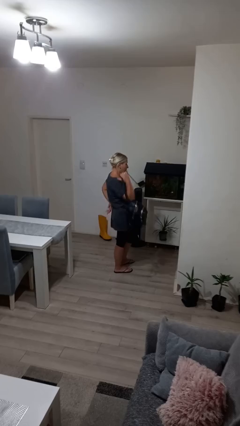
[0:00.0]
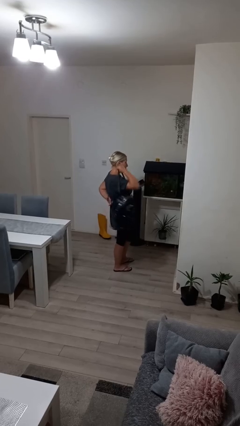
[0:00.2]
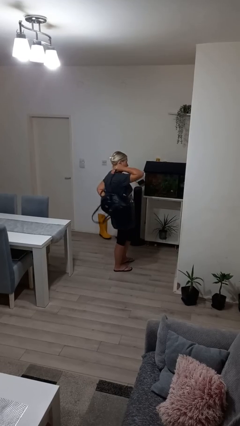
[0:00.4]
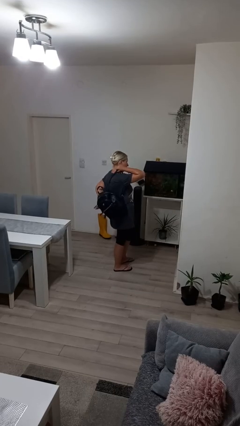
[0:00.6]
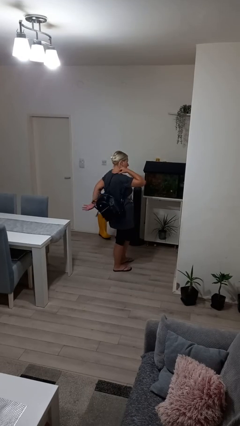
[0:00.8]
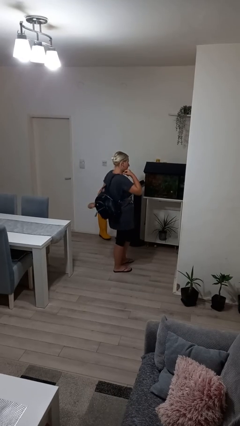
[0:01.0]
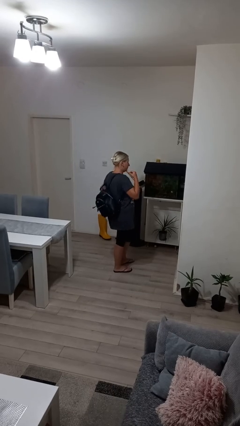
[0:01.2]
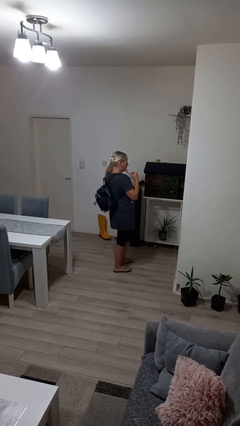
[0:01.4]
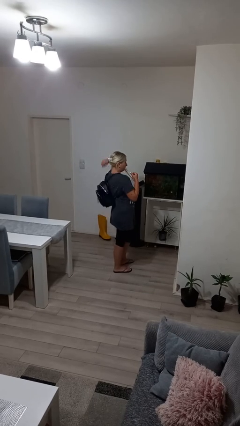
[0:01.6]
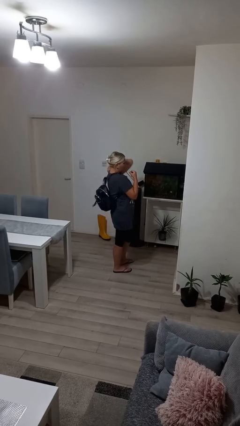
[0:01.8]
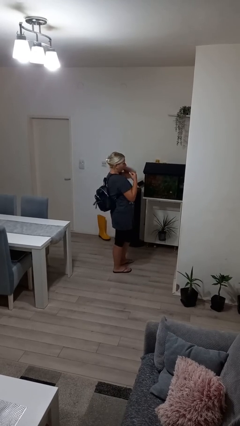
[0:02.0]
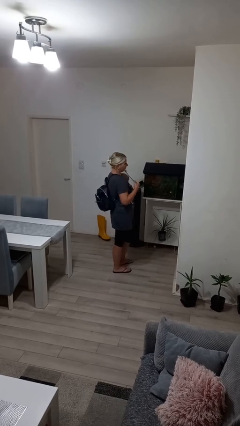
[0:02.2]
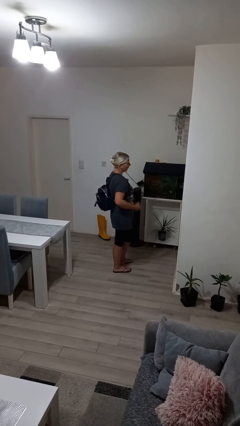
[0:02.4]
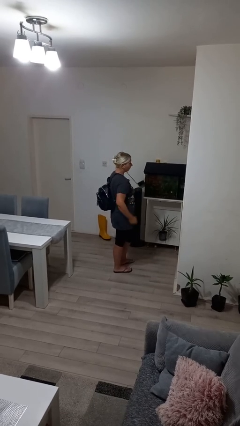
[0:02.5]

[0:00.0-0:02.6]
person puts on backpack

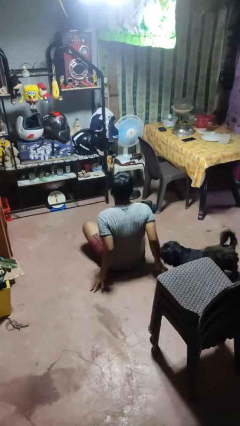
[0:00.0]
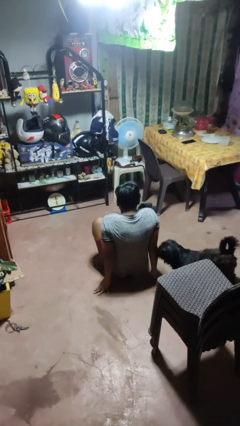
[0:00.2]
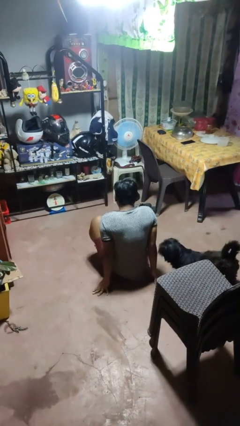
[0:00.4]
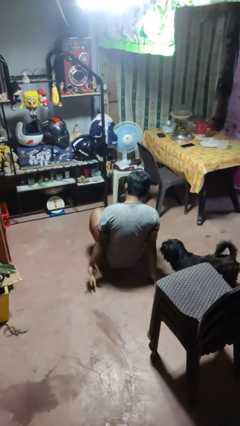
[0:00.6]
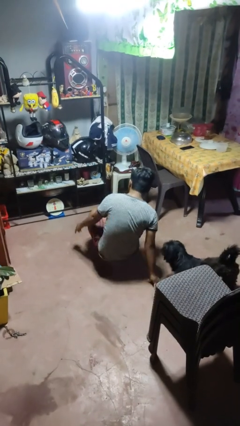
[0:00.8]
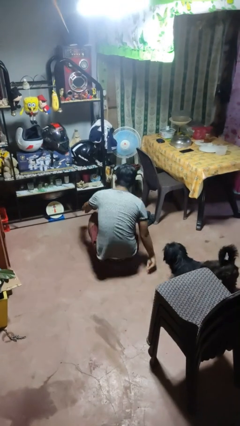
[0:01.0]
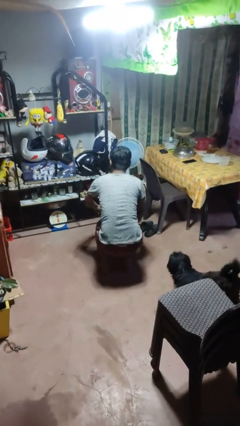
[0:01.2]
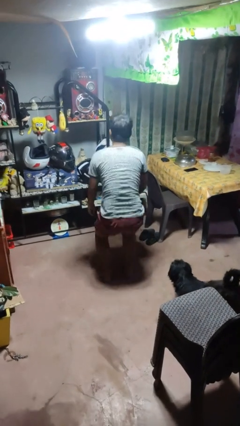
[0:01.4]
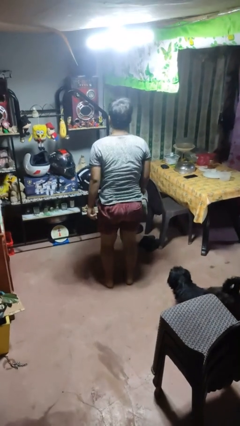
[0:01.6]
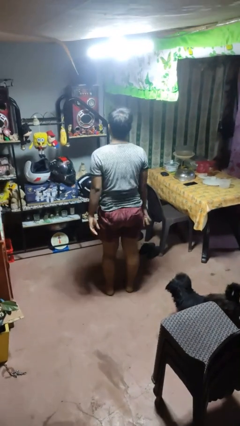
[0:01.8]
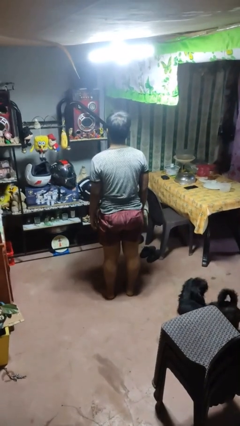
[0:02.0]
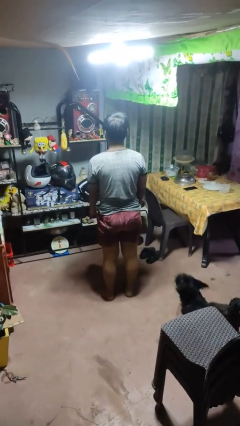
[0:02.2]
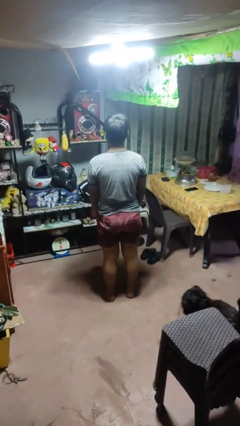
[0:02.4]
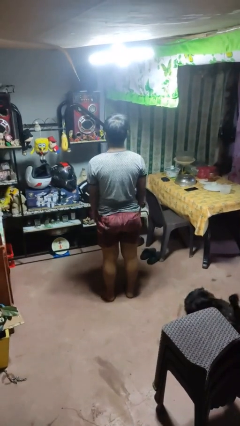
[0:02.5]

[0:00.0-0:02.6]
person stands up from floor

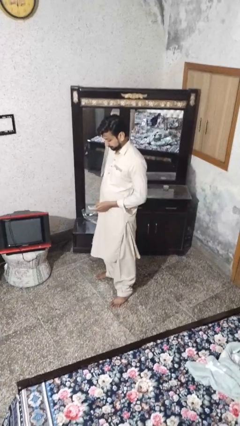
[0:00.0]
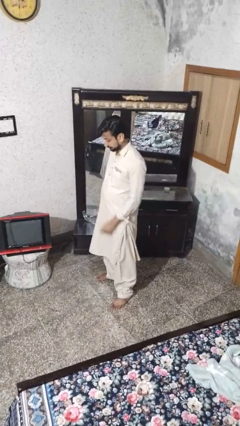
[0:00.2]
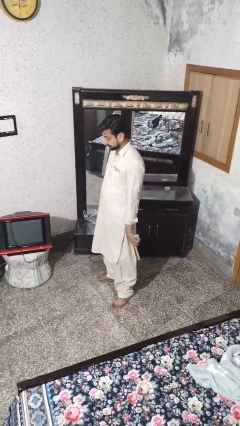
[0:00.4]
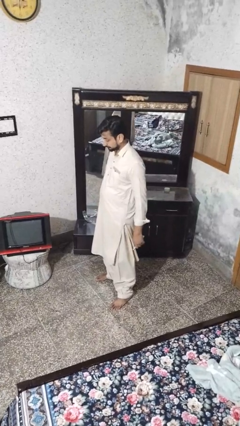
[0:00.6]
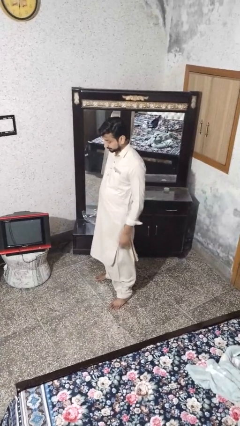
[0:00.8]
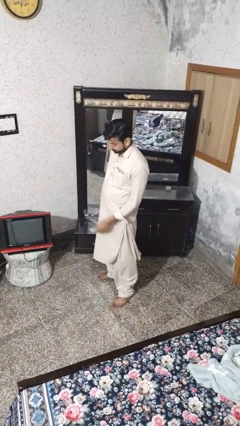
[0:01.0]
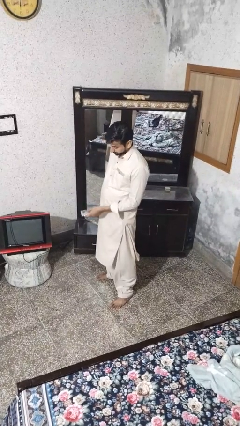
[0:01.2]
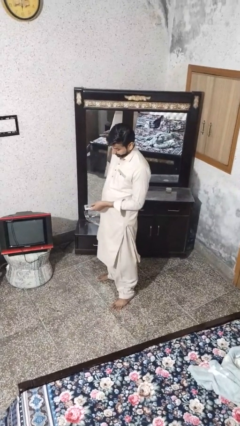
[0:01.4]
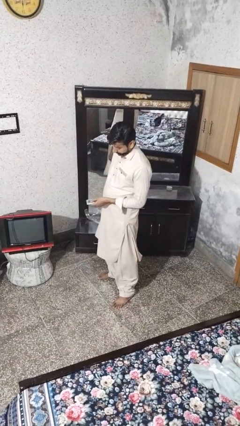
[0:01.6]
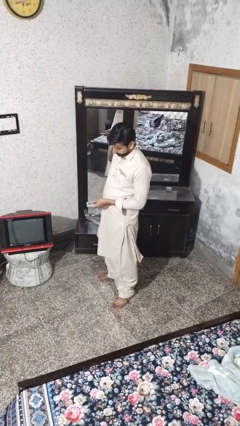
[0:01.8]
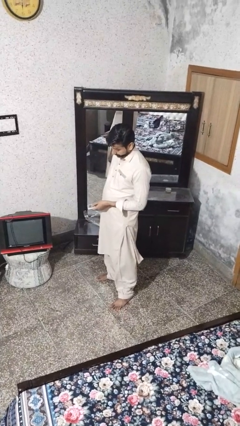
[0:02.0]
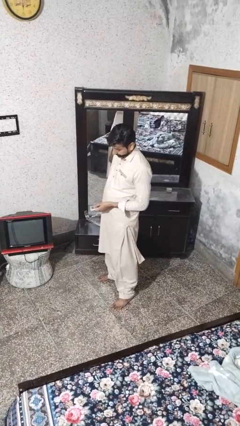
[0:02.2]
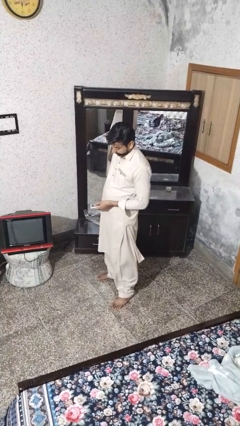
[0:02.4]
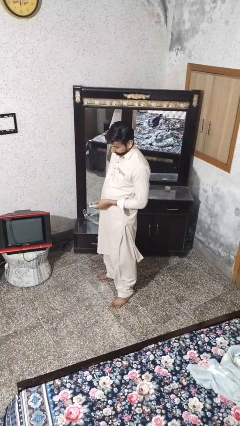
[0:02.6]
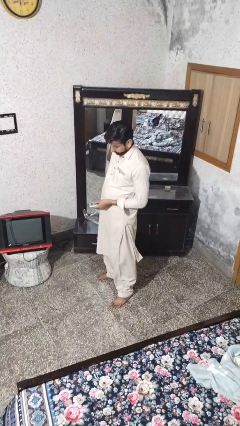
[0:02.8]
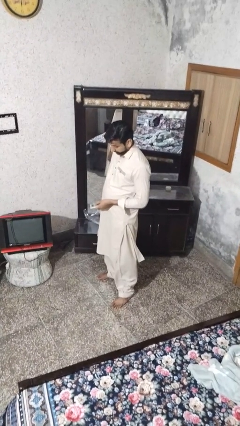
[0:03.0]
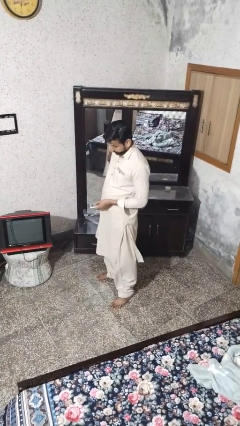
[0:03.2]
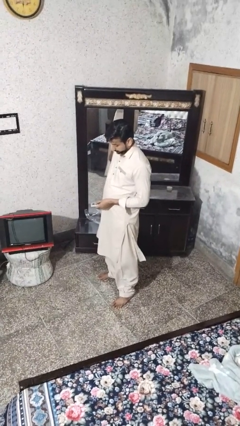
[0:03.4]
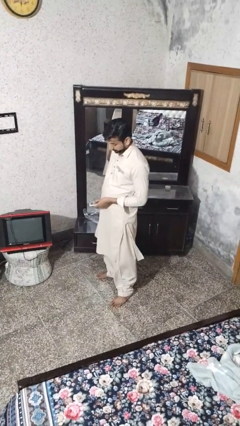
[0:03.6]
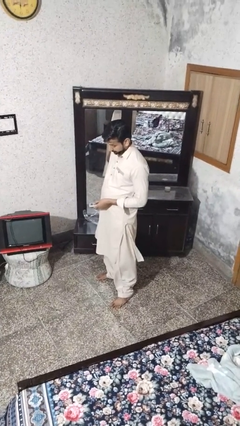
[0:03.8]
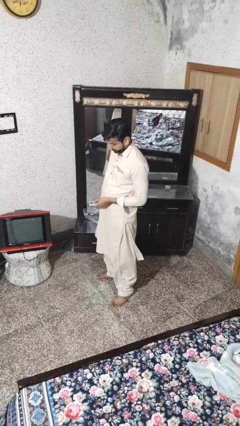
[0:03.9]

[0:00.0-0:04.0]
person uses television remote

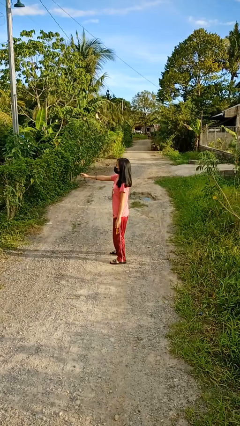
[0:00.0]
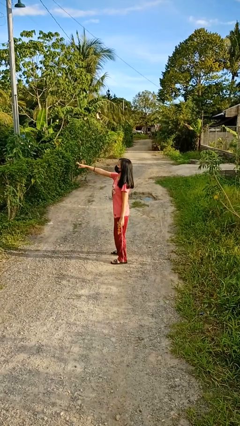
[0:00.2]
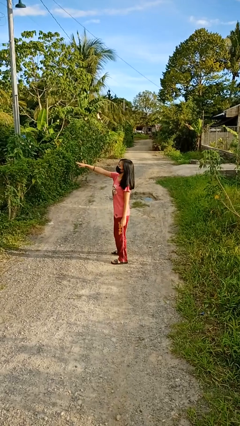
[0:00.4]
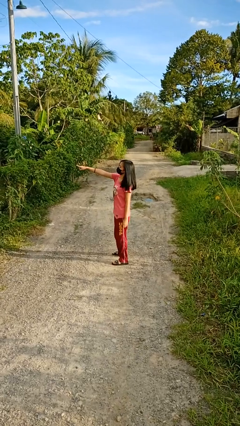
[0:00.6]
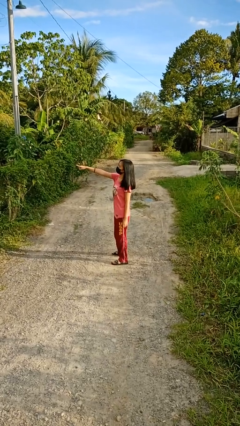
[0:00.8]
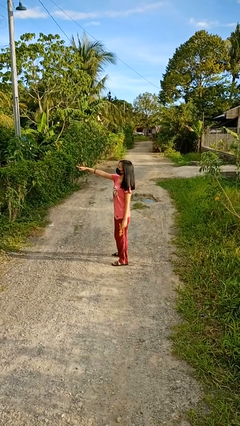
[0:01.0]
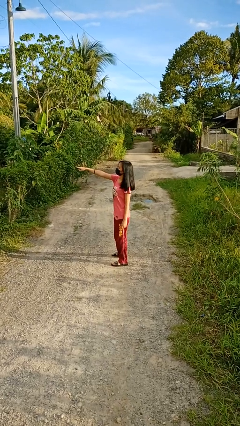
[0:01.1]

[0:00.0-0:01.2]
person points at person

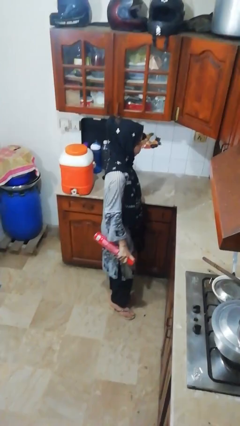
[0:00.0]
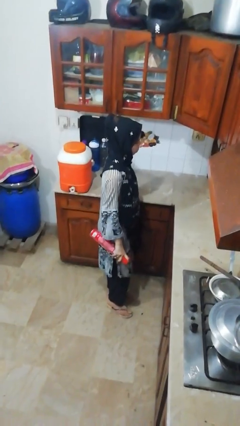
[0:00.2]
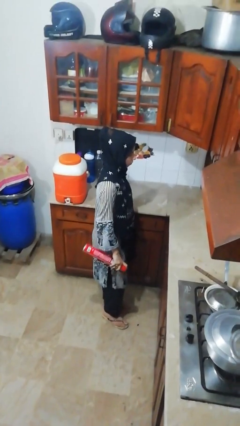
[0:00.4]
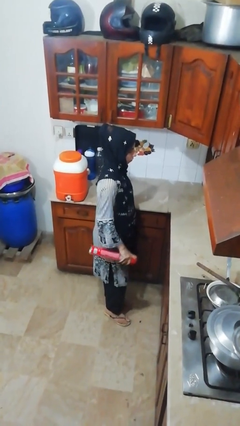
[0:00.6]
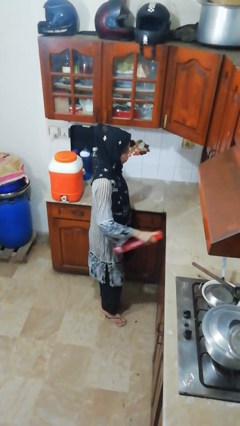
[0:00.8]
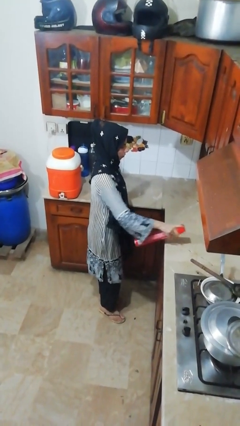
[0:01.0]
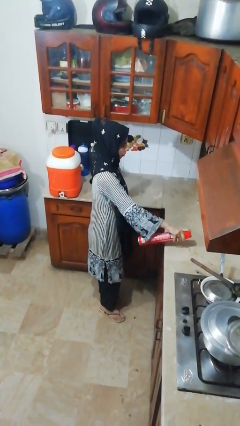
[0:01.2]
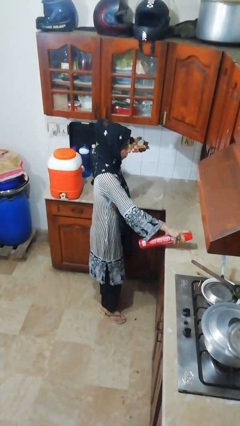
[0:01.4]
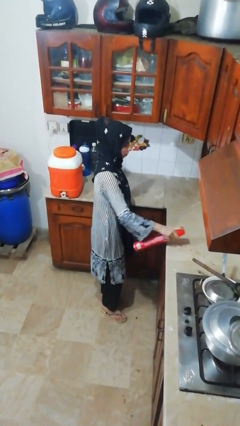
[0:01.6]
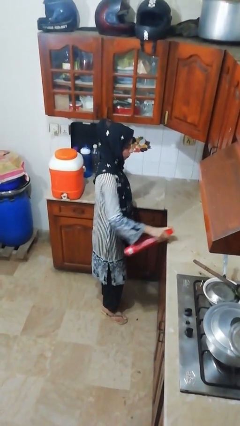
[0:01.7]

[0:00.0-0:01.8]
person sprays from bottle

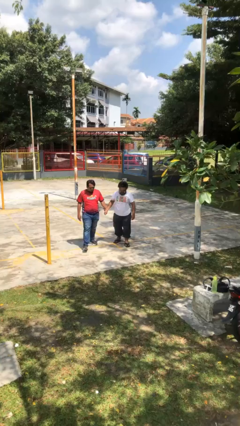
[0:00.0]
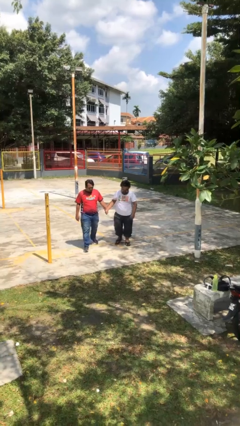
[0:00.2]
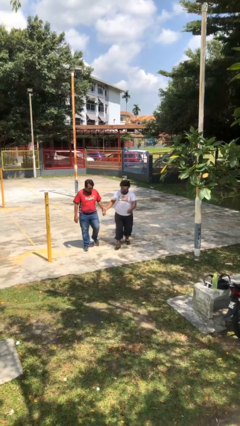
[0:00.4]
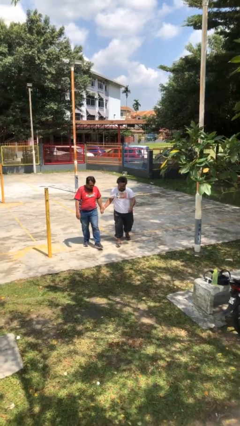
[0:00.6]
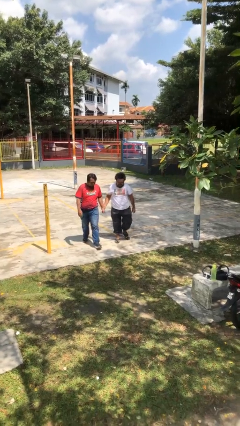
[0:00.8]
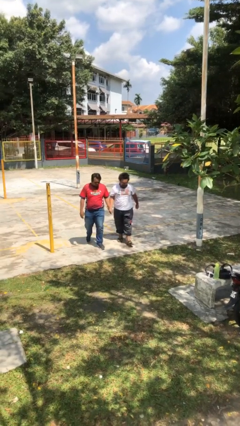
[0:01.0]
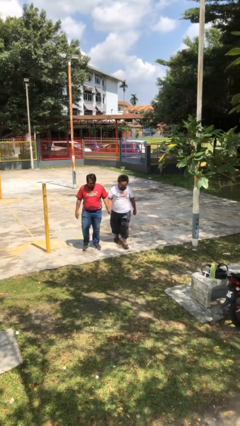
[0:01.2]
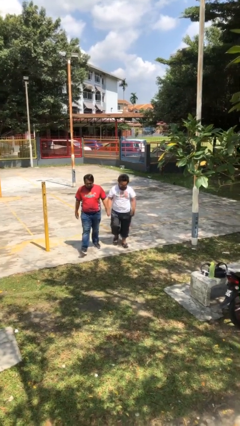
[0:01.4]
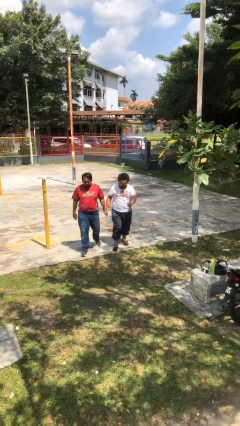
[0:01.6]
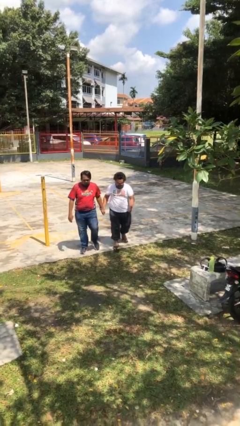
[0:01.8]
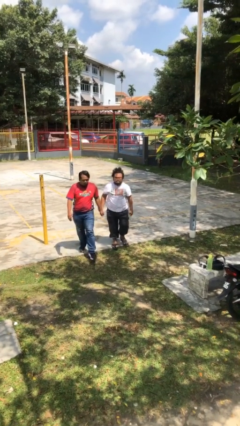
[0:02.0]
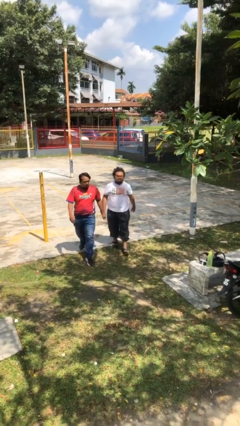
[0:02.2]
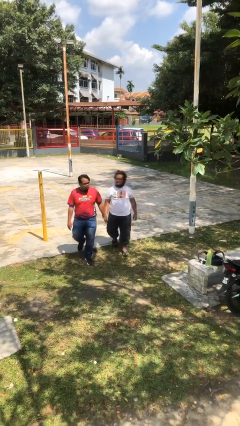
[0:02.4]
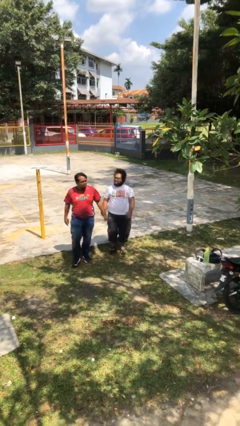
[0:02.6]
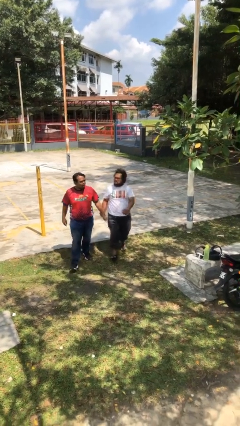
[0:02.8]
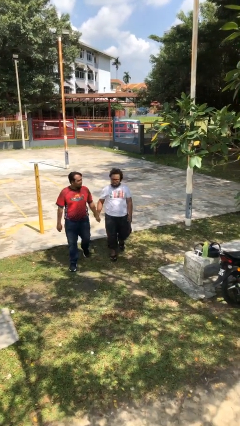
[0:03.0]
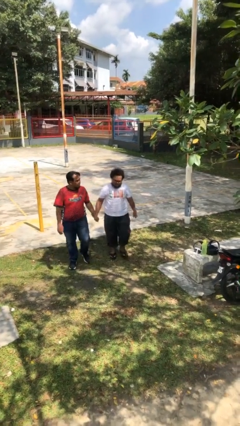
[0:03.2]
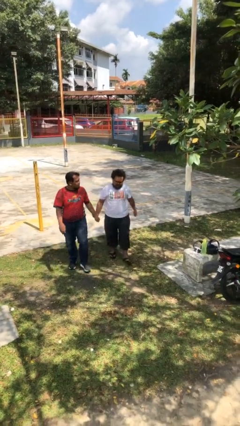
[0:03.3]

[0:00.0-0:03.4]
person holds hand

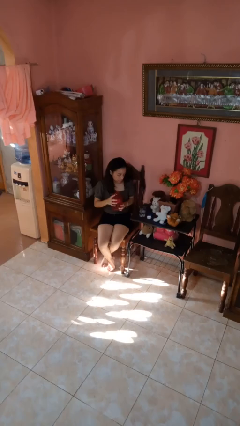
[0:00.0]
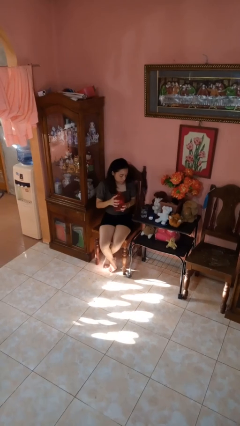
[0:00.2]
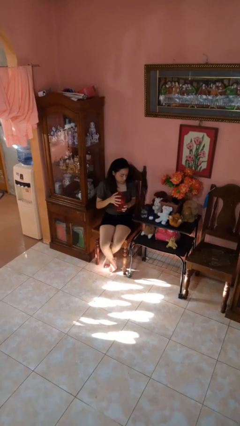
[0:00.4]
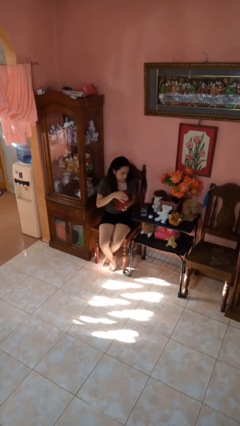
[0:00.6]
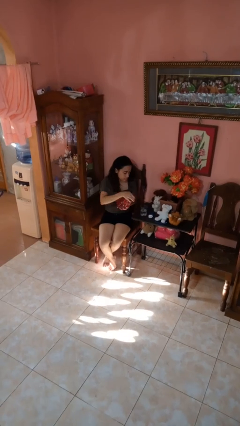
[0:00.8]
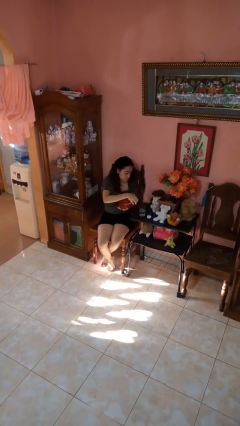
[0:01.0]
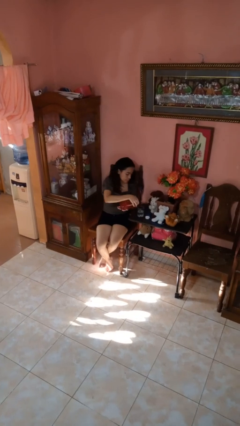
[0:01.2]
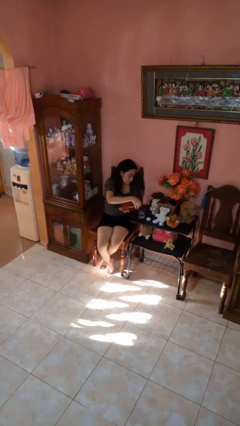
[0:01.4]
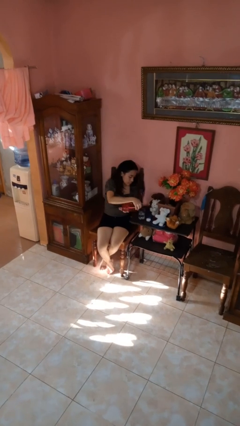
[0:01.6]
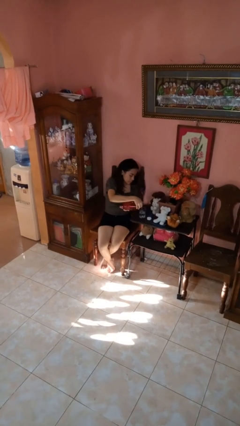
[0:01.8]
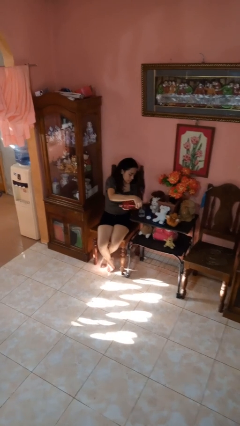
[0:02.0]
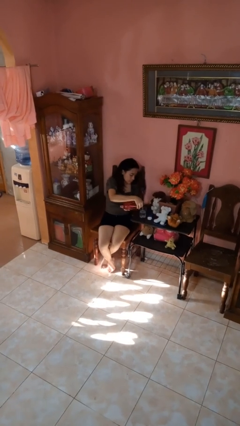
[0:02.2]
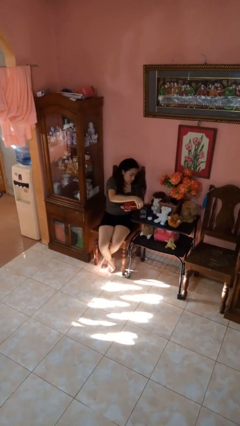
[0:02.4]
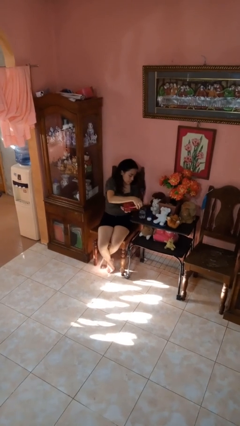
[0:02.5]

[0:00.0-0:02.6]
person pours liquid into cup
